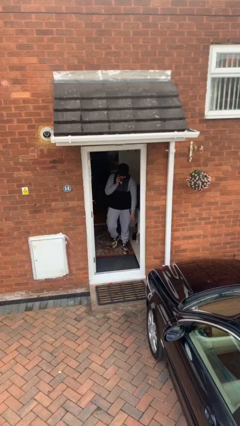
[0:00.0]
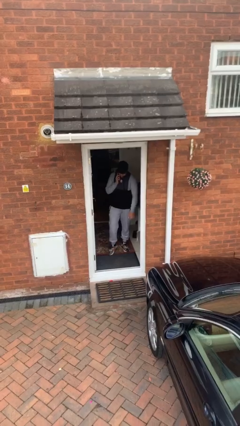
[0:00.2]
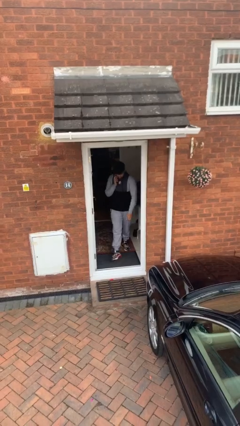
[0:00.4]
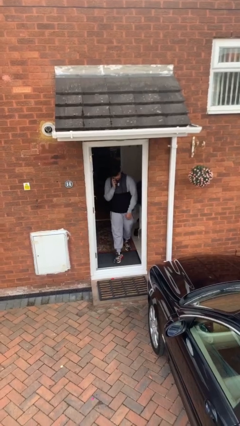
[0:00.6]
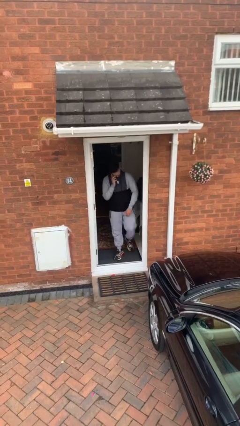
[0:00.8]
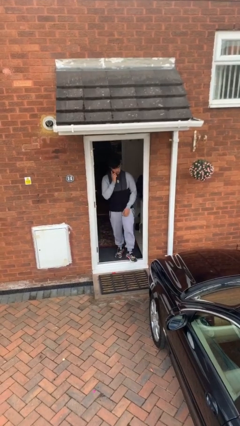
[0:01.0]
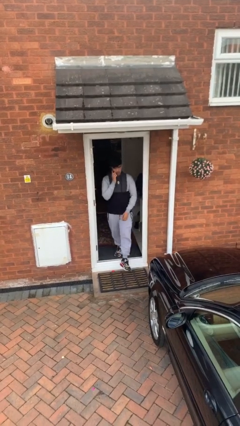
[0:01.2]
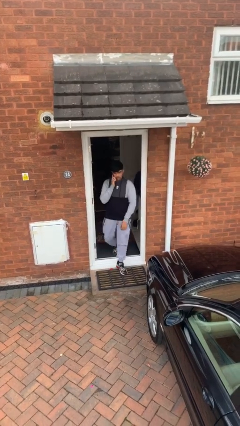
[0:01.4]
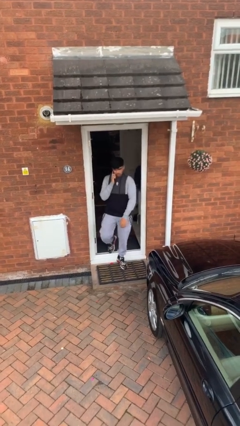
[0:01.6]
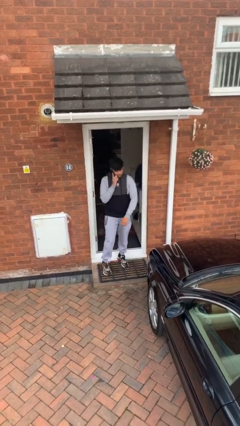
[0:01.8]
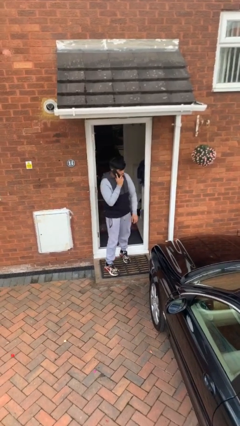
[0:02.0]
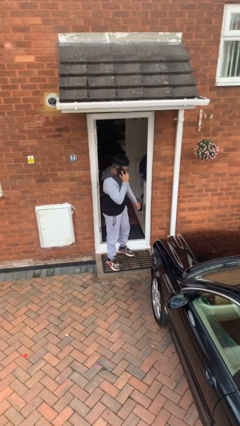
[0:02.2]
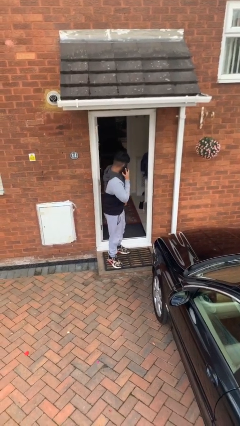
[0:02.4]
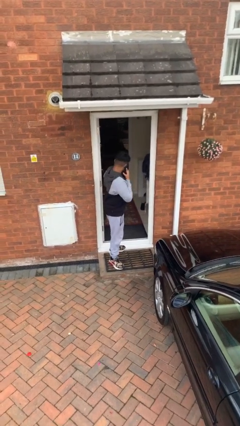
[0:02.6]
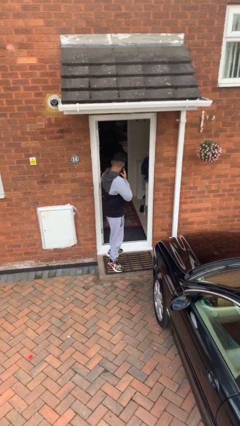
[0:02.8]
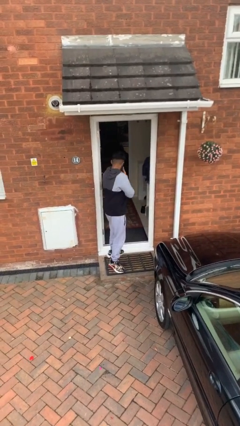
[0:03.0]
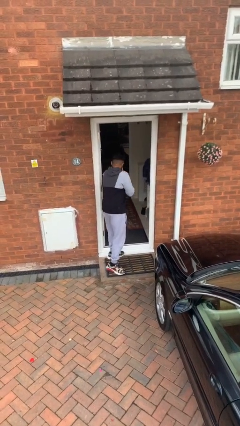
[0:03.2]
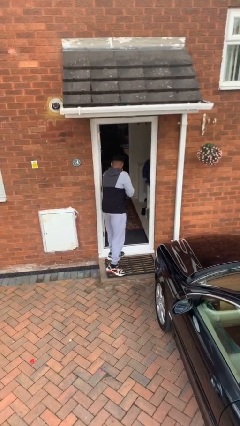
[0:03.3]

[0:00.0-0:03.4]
person enters scene through structure

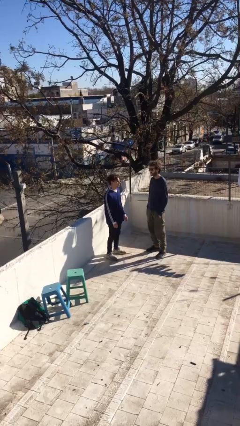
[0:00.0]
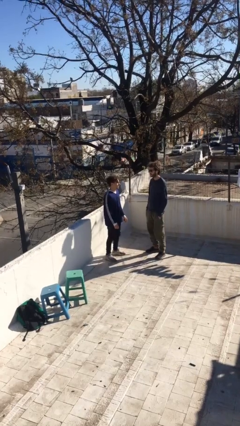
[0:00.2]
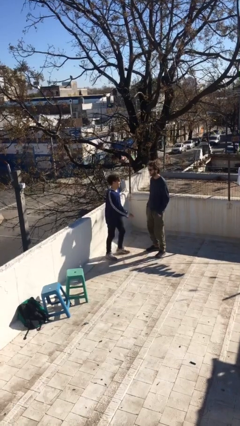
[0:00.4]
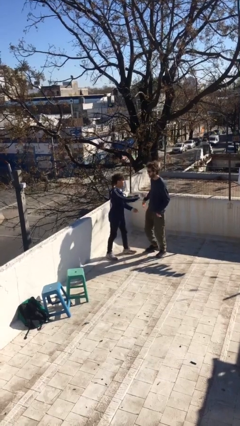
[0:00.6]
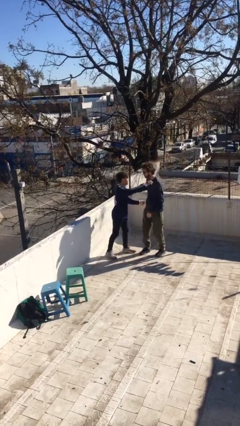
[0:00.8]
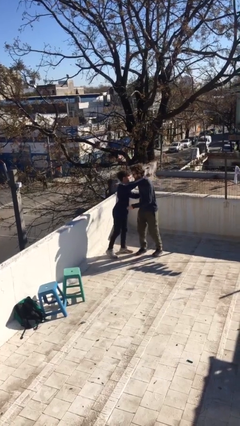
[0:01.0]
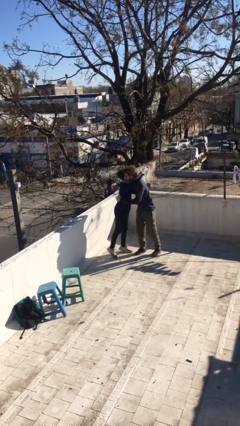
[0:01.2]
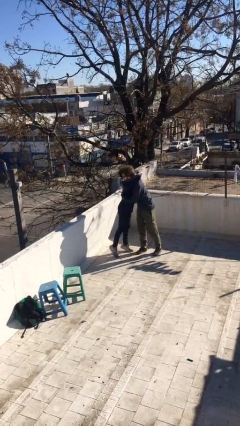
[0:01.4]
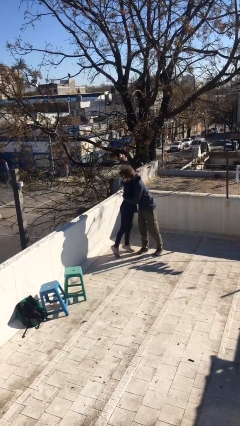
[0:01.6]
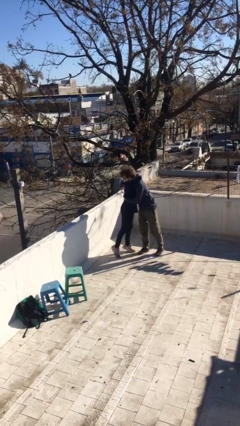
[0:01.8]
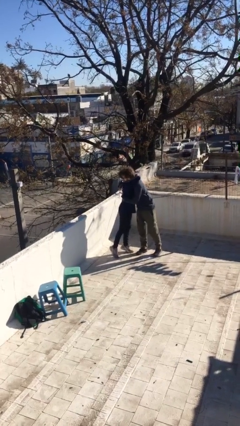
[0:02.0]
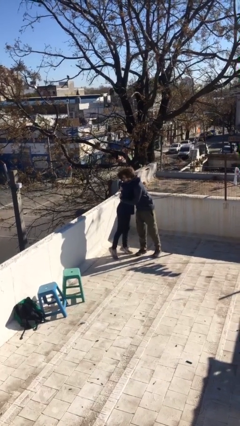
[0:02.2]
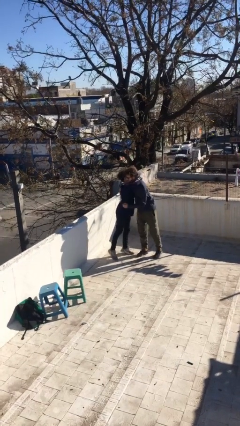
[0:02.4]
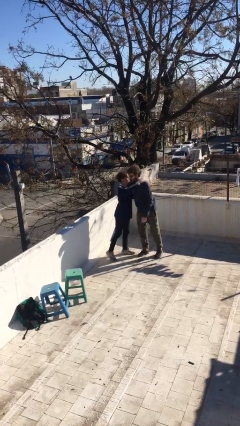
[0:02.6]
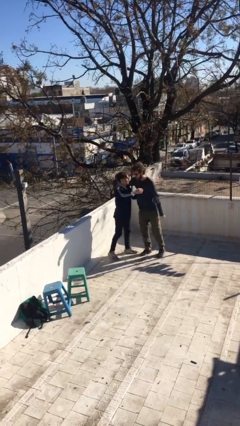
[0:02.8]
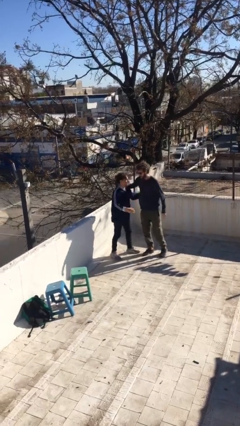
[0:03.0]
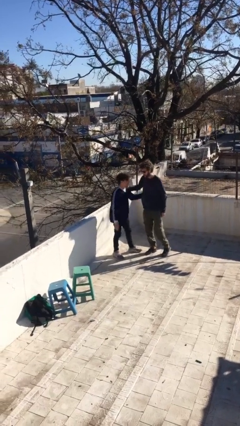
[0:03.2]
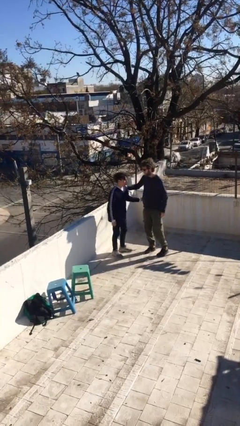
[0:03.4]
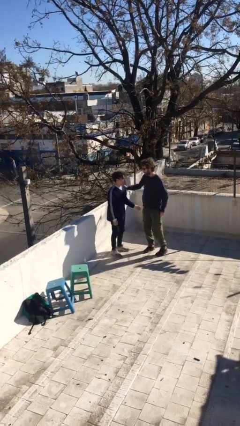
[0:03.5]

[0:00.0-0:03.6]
person embraces person

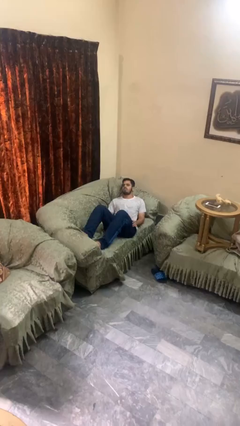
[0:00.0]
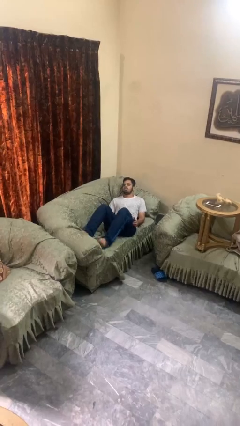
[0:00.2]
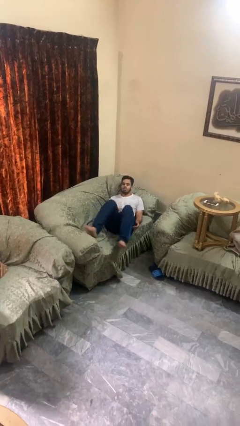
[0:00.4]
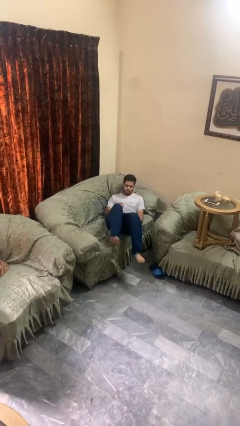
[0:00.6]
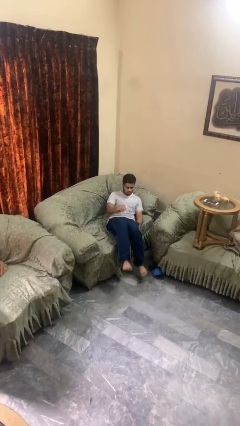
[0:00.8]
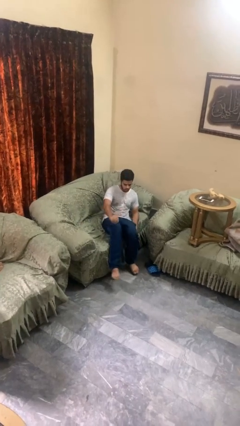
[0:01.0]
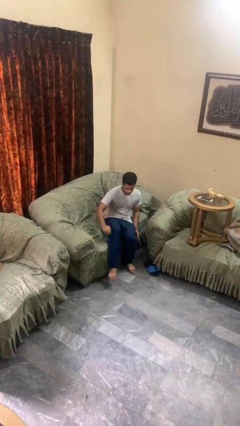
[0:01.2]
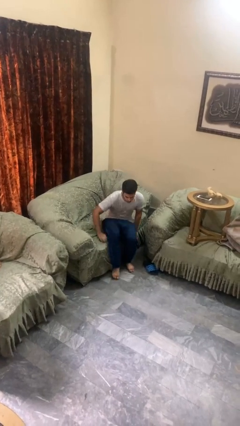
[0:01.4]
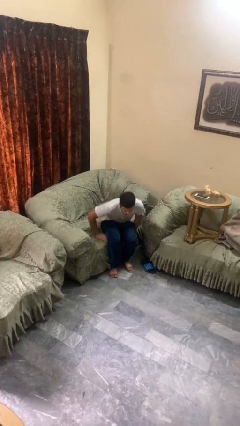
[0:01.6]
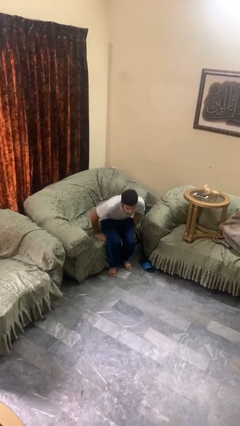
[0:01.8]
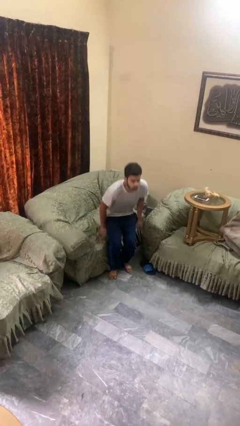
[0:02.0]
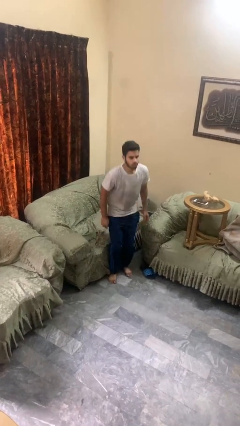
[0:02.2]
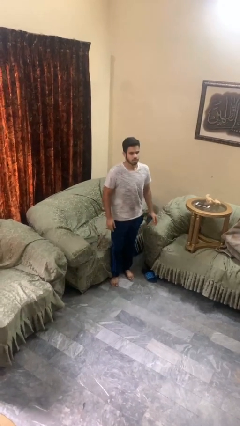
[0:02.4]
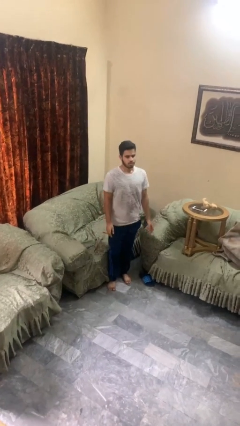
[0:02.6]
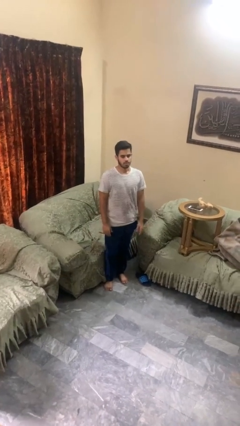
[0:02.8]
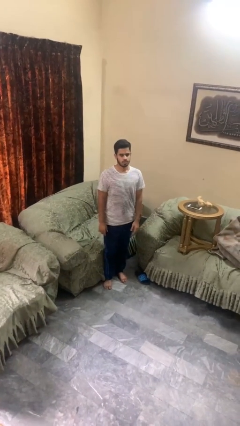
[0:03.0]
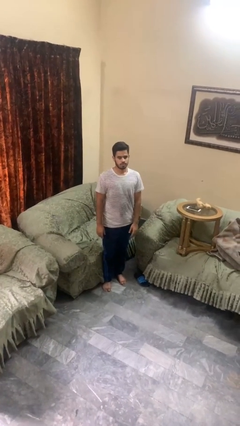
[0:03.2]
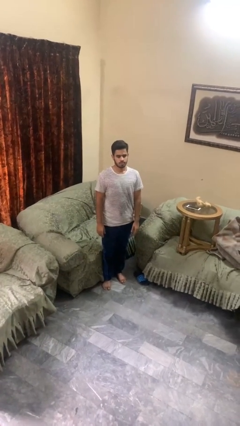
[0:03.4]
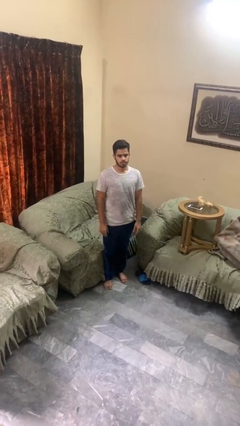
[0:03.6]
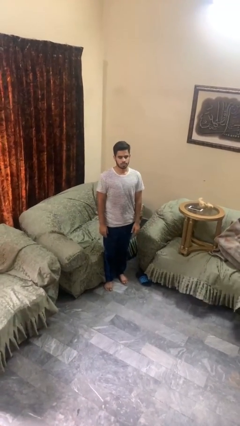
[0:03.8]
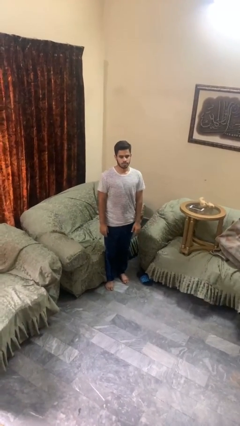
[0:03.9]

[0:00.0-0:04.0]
person stands up

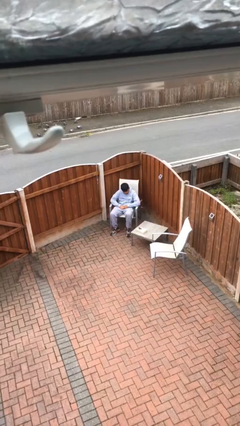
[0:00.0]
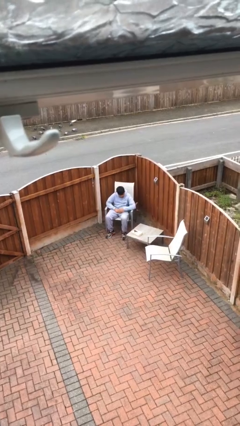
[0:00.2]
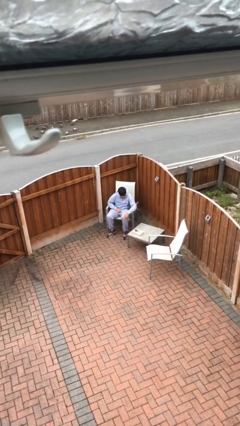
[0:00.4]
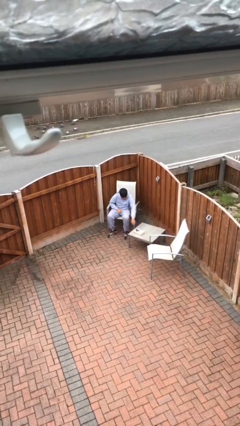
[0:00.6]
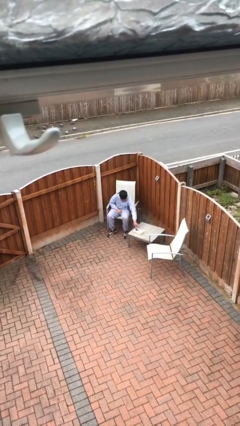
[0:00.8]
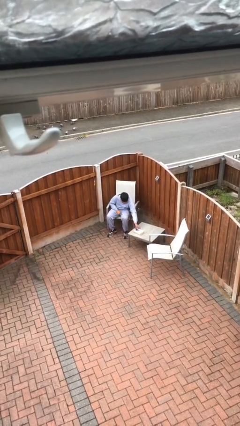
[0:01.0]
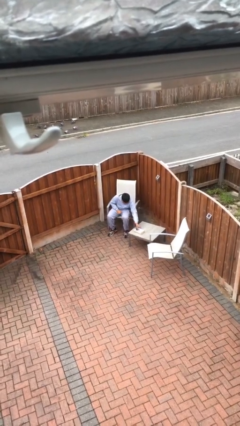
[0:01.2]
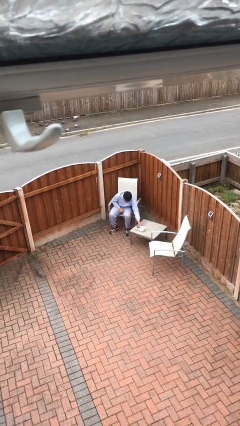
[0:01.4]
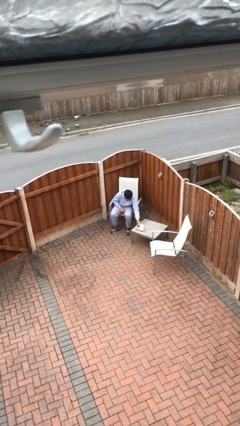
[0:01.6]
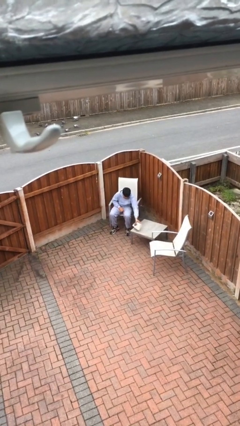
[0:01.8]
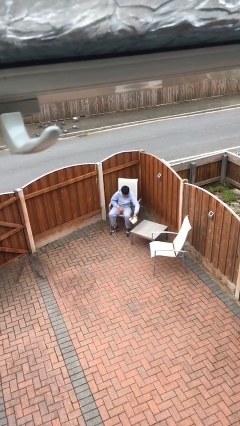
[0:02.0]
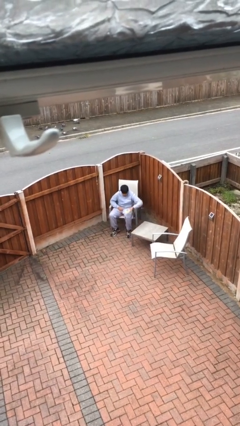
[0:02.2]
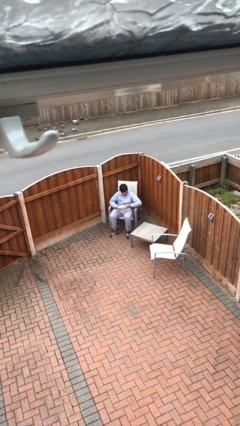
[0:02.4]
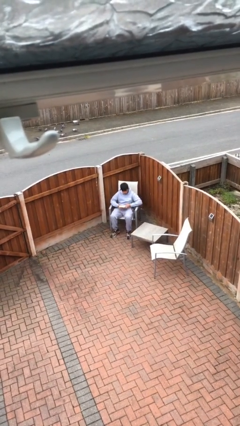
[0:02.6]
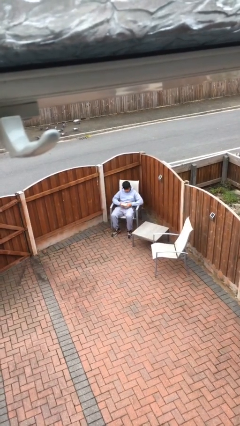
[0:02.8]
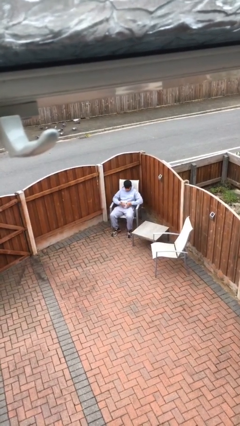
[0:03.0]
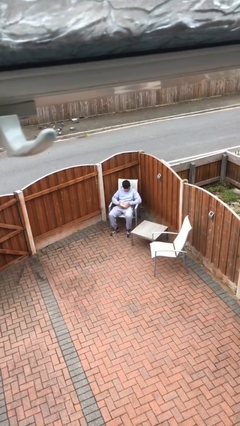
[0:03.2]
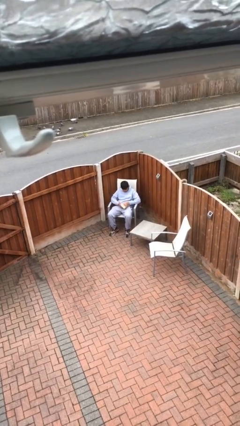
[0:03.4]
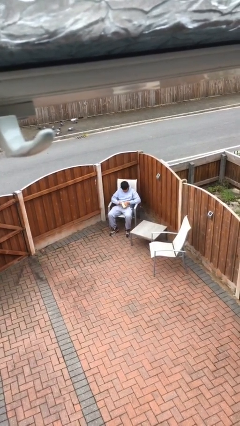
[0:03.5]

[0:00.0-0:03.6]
person picks up object from table

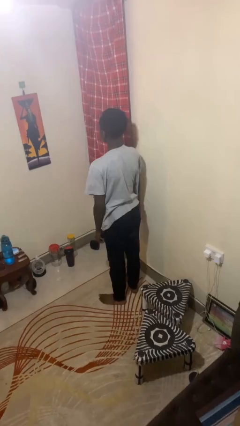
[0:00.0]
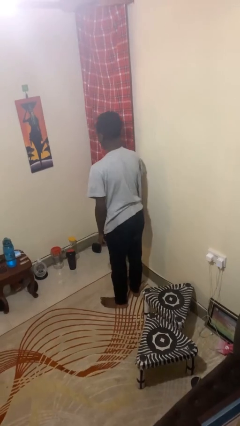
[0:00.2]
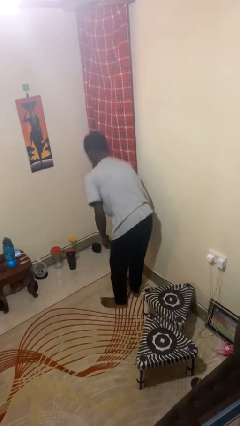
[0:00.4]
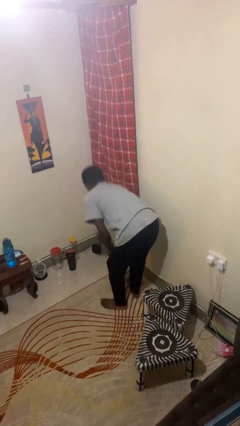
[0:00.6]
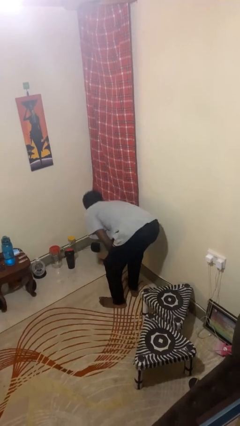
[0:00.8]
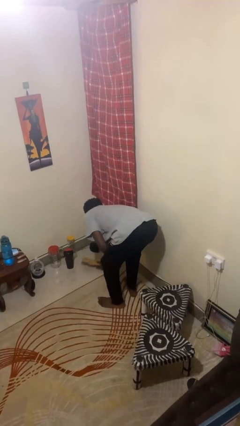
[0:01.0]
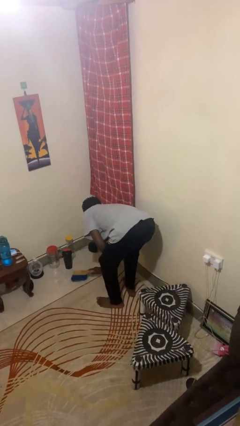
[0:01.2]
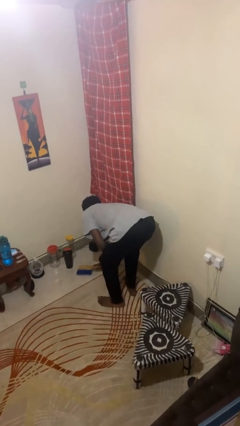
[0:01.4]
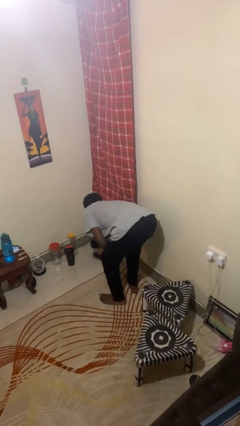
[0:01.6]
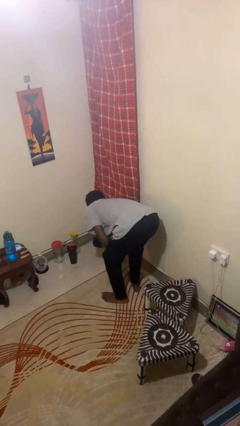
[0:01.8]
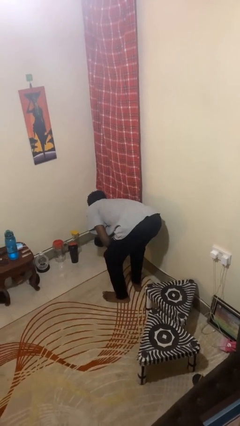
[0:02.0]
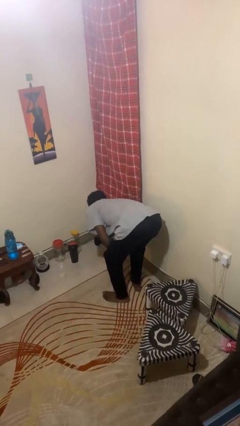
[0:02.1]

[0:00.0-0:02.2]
person sweeps floor

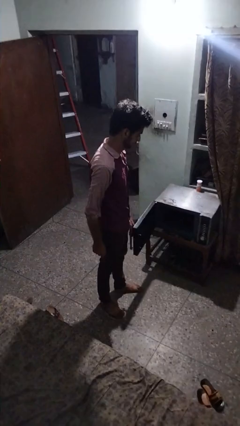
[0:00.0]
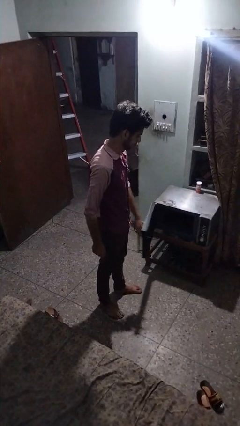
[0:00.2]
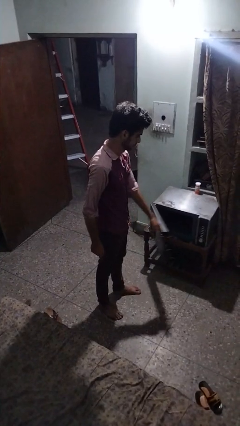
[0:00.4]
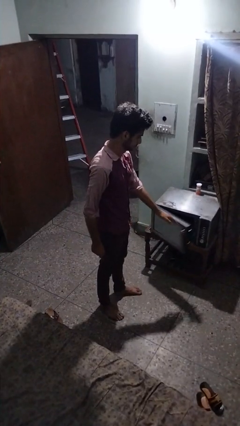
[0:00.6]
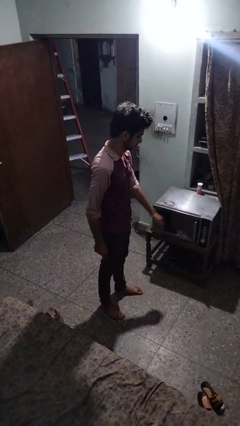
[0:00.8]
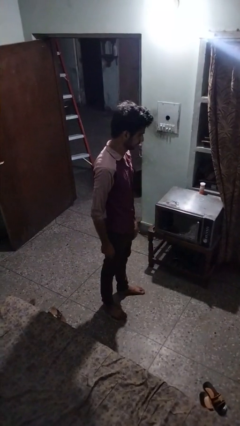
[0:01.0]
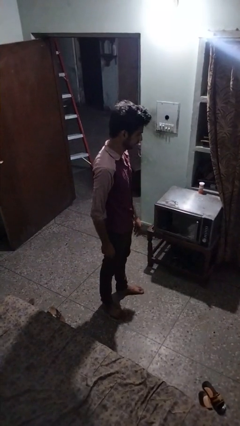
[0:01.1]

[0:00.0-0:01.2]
person closes microwave
